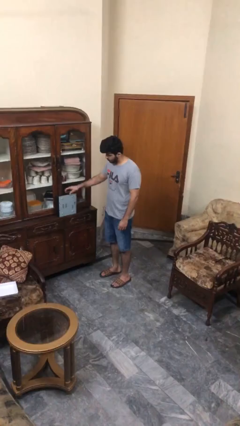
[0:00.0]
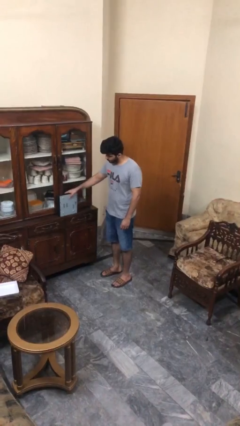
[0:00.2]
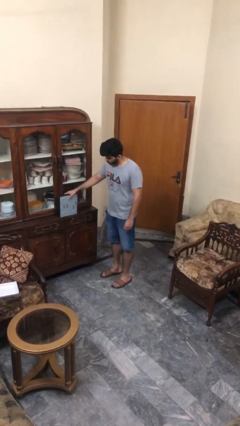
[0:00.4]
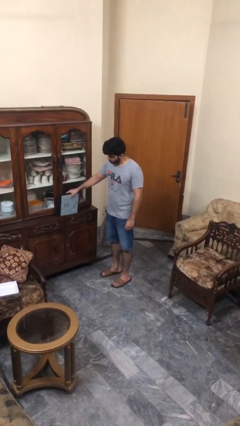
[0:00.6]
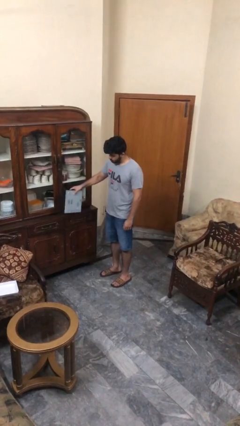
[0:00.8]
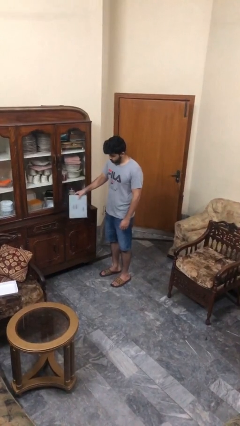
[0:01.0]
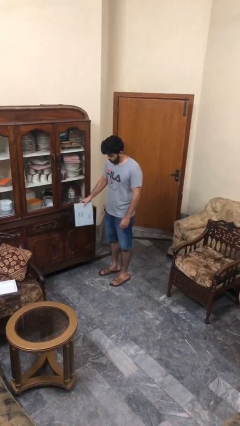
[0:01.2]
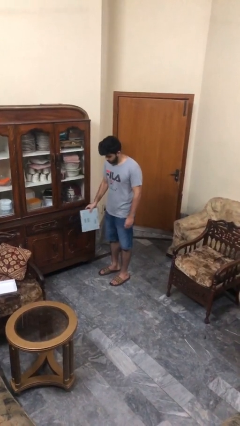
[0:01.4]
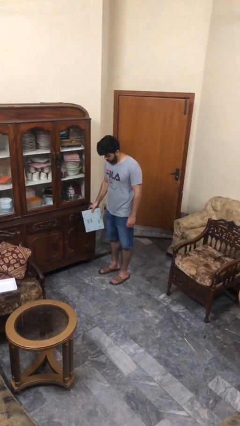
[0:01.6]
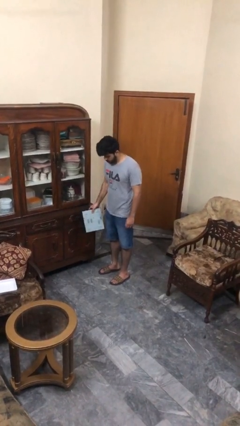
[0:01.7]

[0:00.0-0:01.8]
person picks up object from countertop

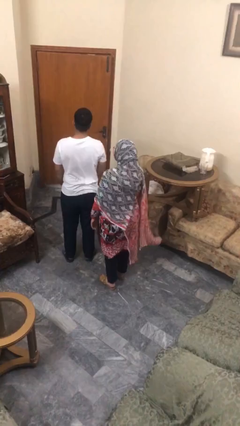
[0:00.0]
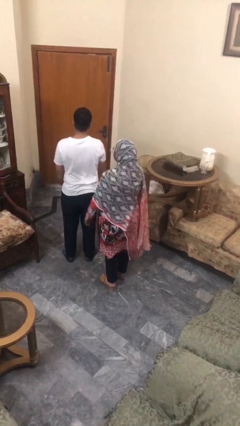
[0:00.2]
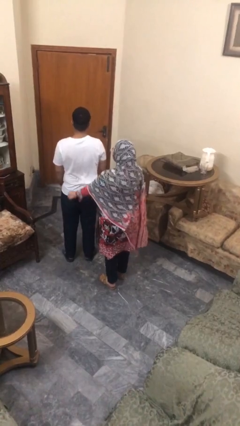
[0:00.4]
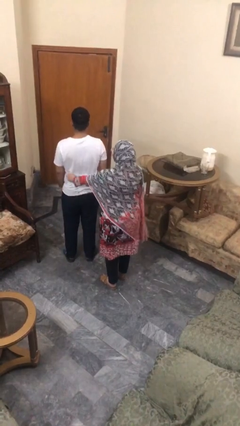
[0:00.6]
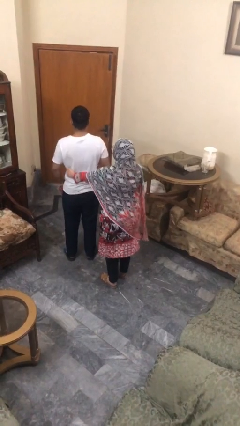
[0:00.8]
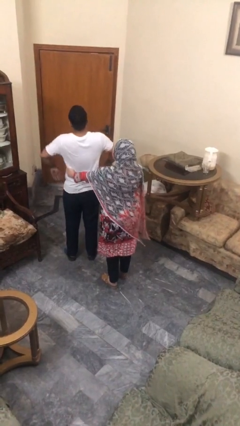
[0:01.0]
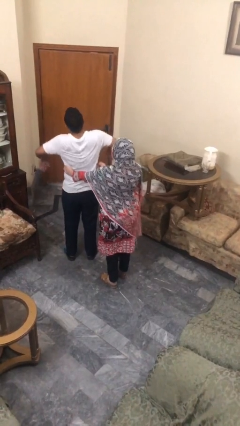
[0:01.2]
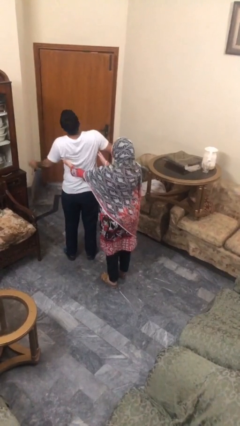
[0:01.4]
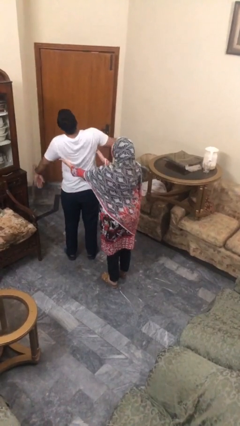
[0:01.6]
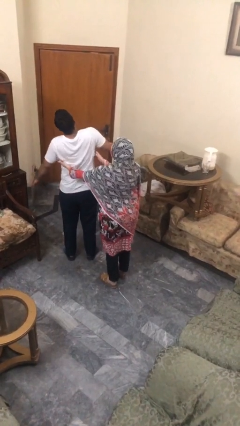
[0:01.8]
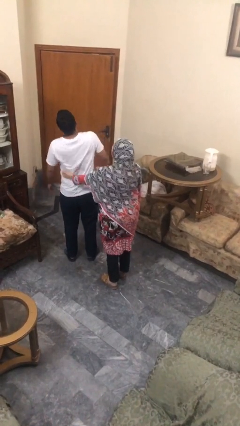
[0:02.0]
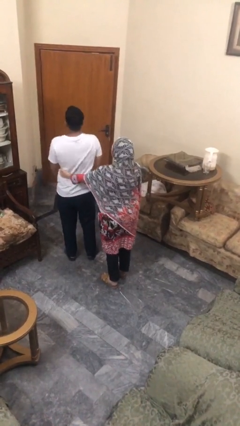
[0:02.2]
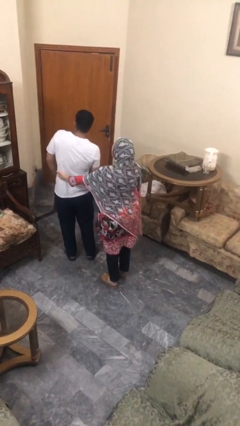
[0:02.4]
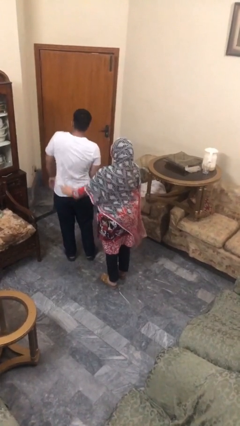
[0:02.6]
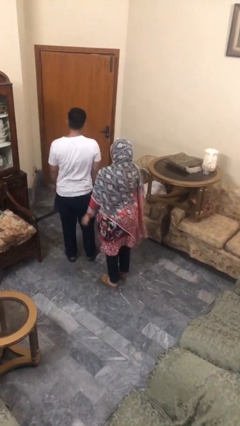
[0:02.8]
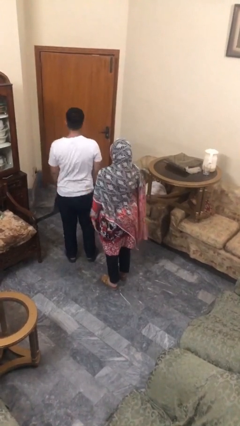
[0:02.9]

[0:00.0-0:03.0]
person tickles person

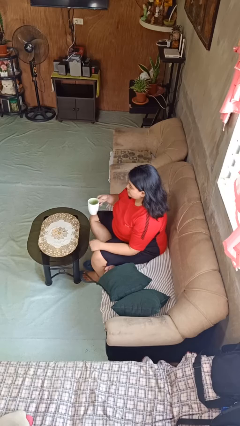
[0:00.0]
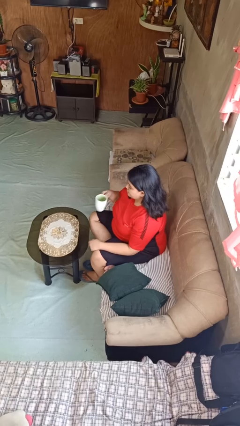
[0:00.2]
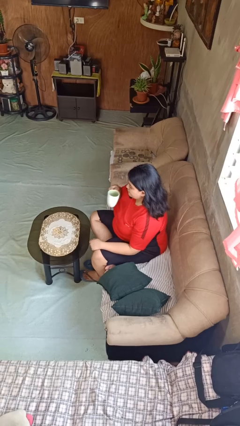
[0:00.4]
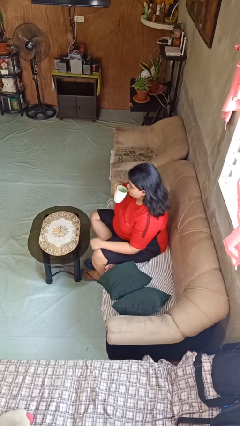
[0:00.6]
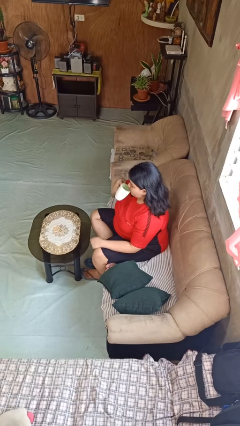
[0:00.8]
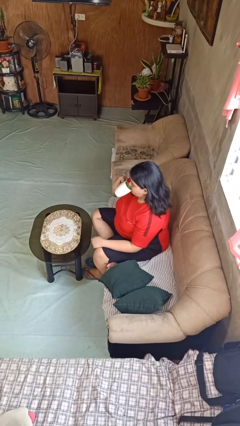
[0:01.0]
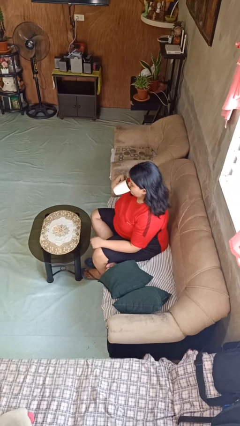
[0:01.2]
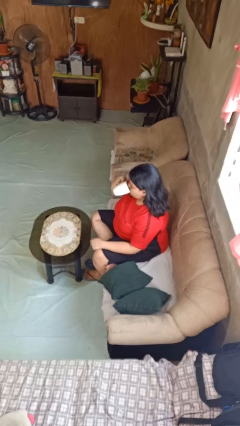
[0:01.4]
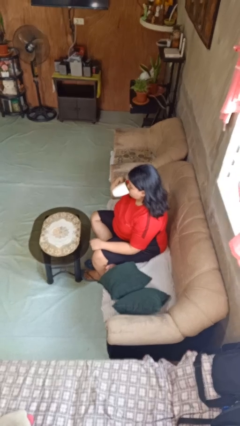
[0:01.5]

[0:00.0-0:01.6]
person drinks from mug

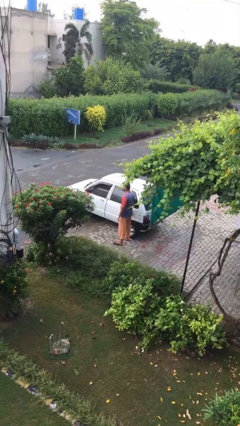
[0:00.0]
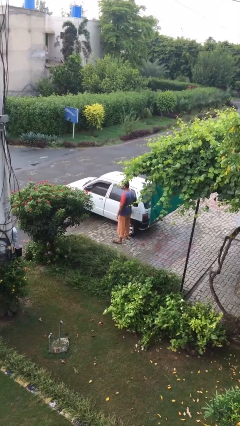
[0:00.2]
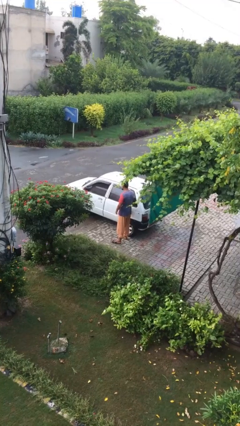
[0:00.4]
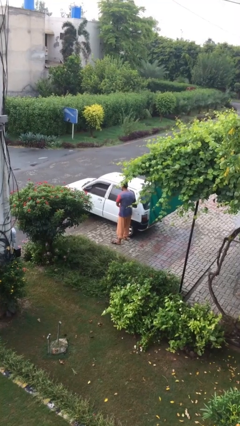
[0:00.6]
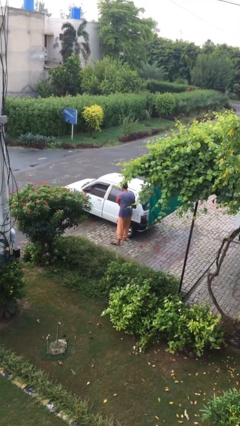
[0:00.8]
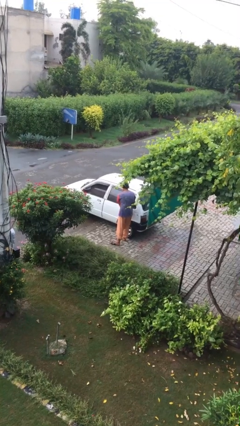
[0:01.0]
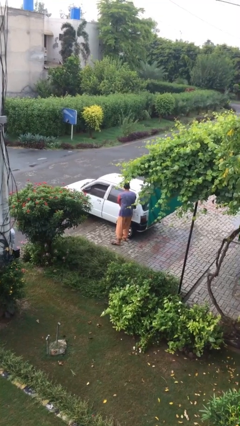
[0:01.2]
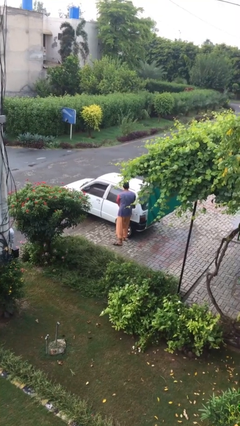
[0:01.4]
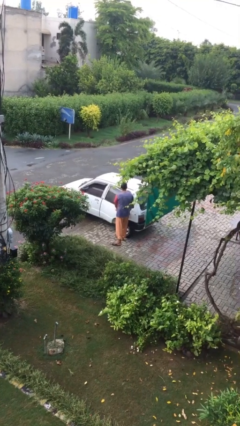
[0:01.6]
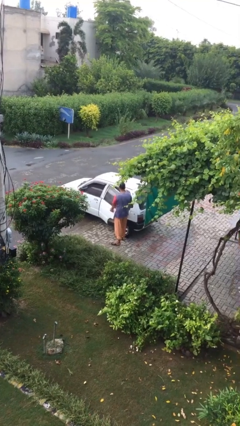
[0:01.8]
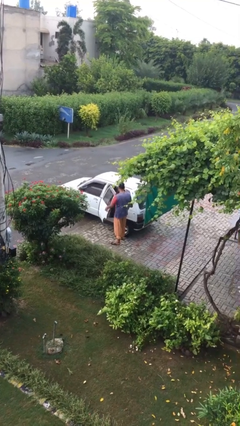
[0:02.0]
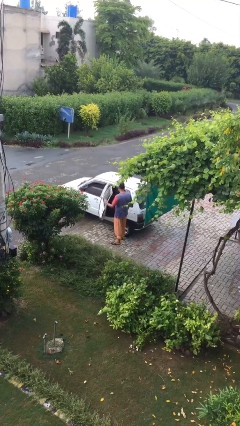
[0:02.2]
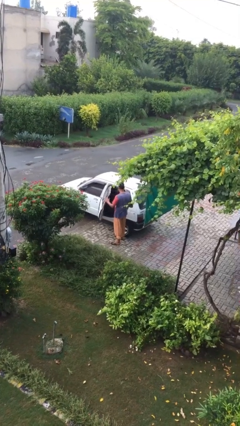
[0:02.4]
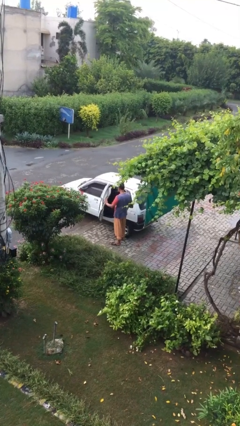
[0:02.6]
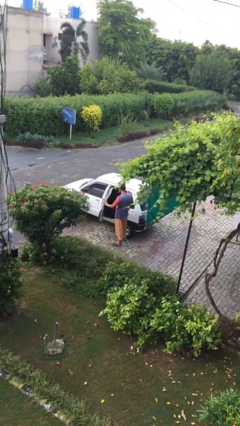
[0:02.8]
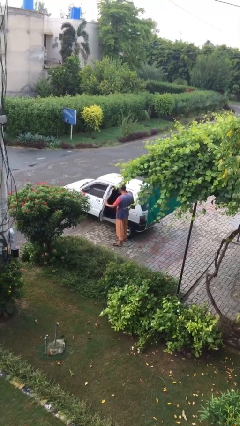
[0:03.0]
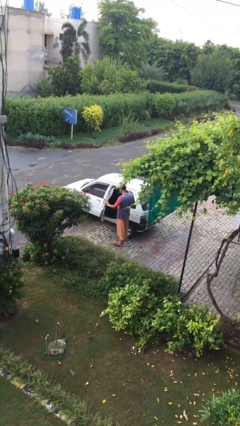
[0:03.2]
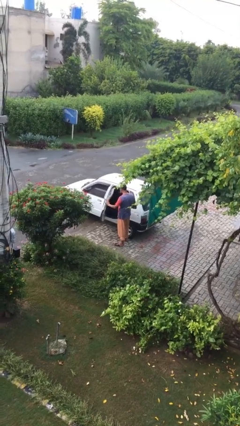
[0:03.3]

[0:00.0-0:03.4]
person opens car door

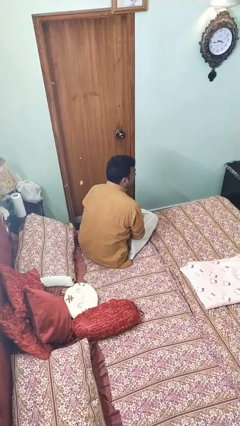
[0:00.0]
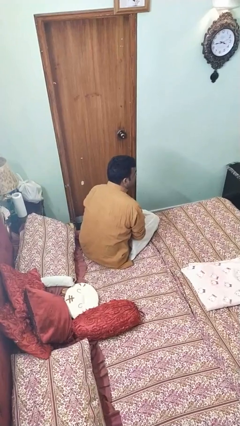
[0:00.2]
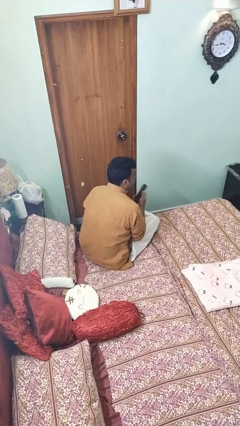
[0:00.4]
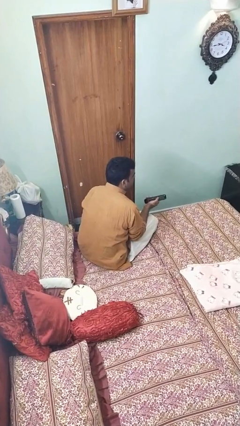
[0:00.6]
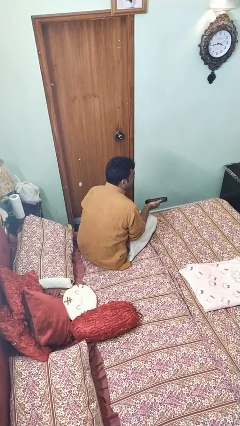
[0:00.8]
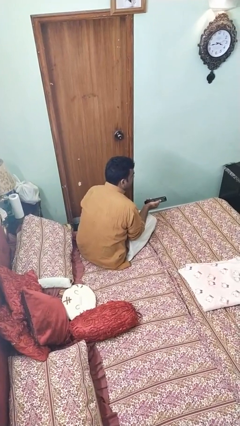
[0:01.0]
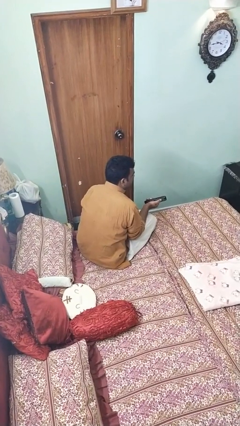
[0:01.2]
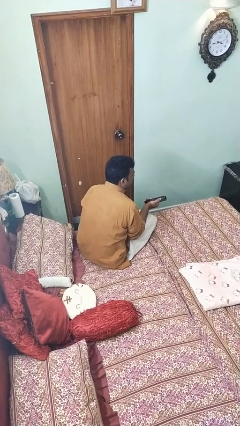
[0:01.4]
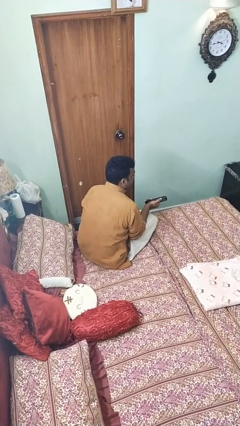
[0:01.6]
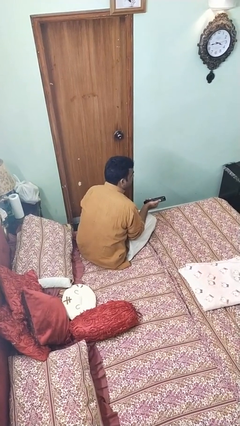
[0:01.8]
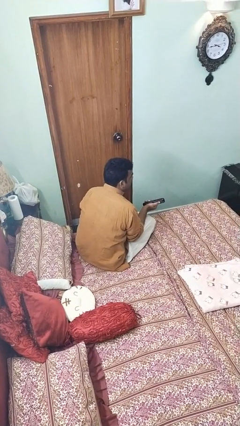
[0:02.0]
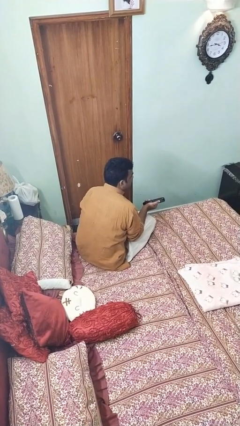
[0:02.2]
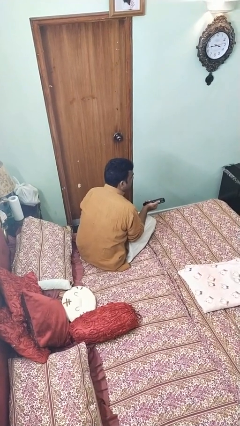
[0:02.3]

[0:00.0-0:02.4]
person uses television remote

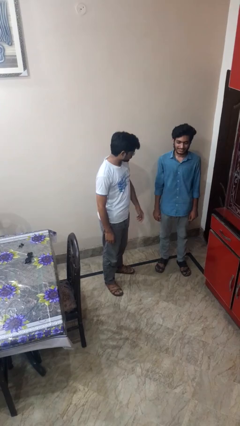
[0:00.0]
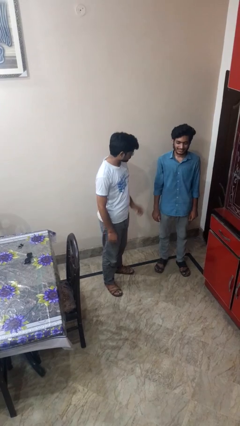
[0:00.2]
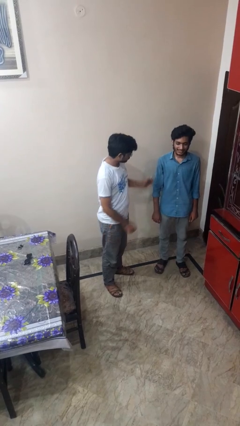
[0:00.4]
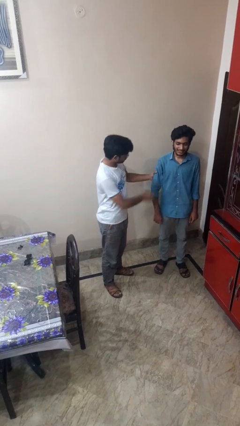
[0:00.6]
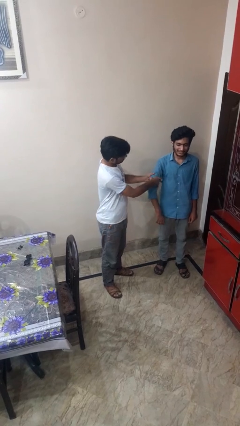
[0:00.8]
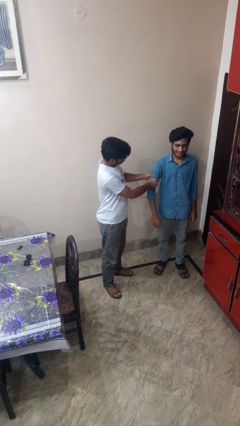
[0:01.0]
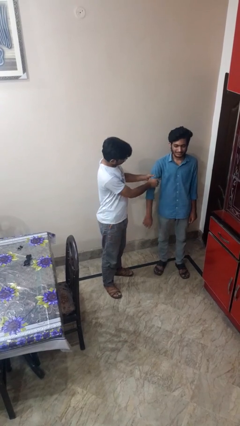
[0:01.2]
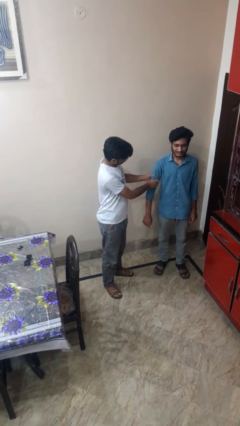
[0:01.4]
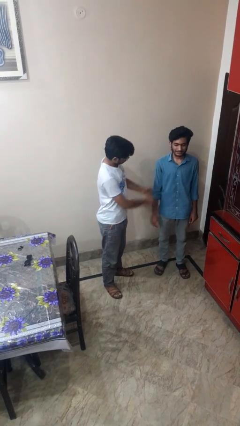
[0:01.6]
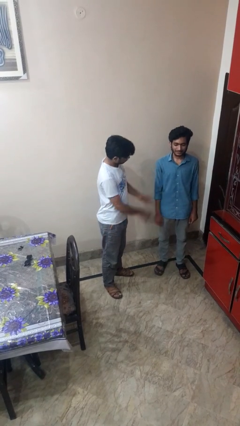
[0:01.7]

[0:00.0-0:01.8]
person puts object into backpack

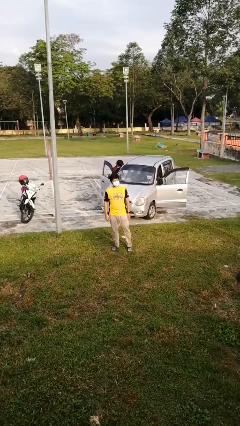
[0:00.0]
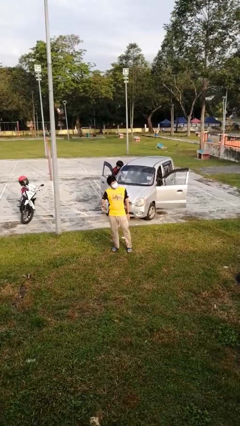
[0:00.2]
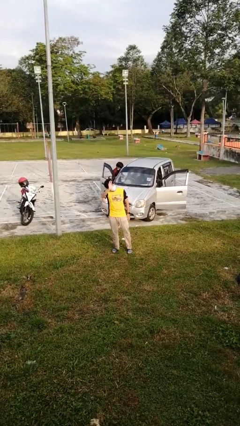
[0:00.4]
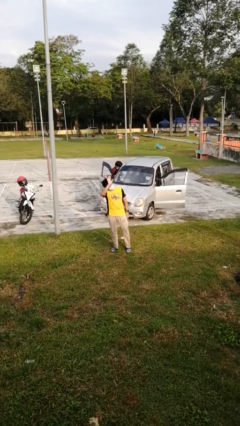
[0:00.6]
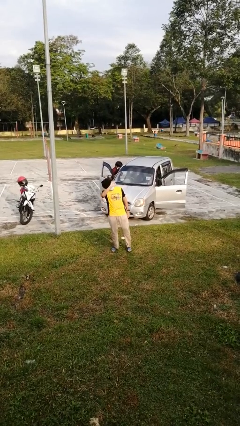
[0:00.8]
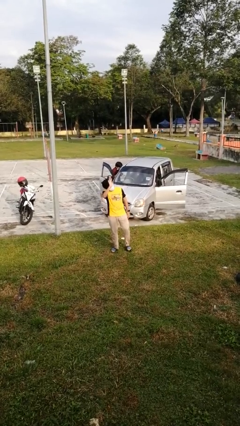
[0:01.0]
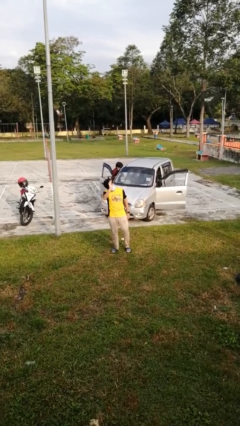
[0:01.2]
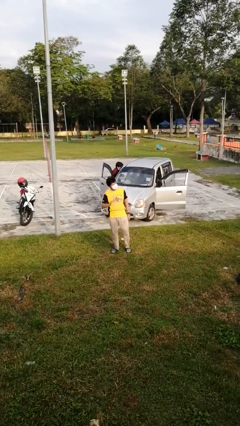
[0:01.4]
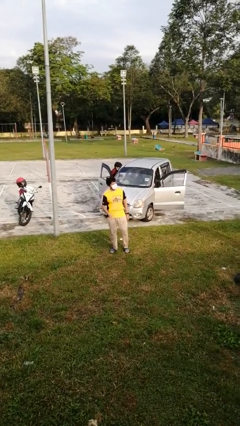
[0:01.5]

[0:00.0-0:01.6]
person waves at person

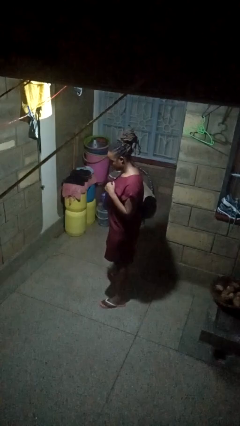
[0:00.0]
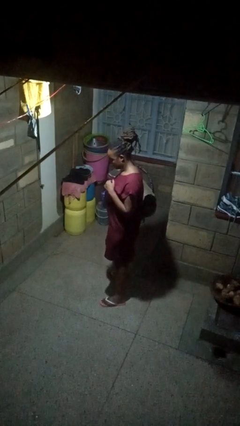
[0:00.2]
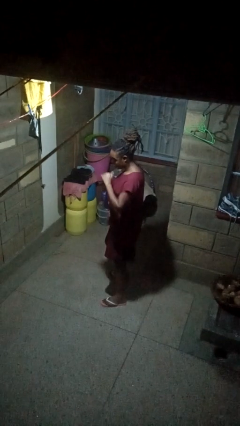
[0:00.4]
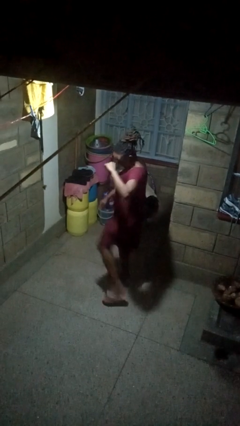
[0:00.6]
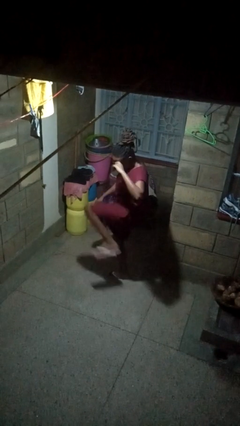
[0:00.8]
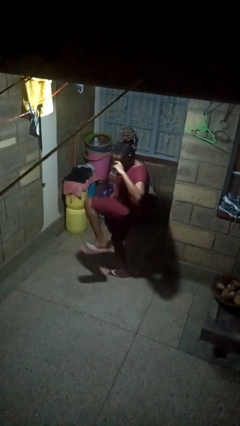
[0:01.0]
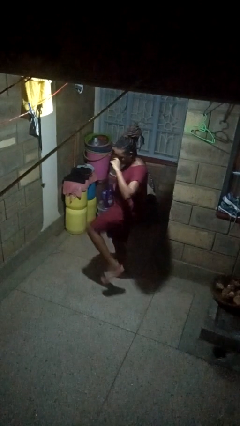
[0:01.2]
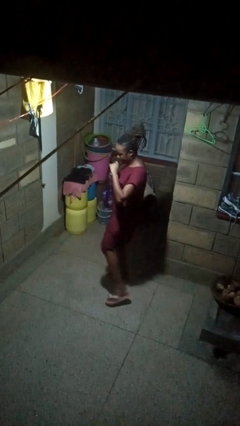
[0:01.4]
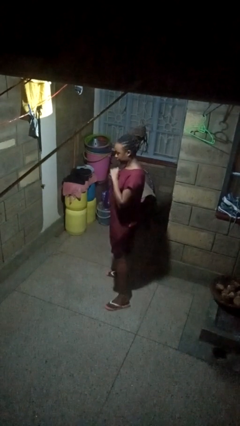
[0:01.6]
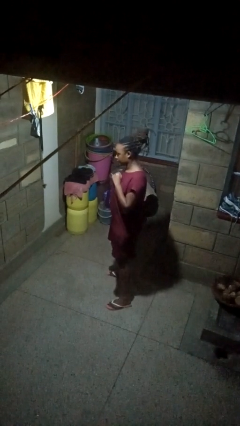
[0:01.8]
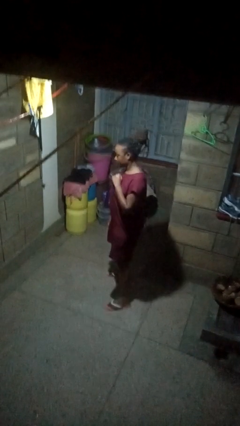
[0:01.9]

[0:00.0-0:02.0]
person karate kicks
